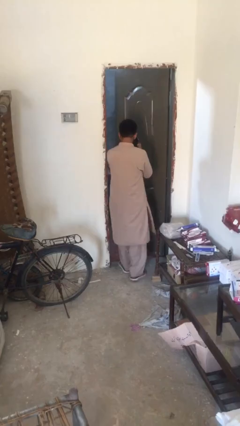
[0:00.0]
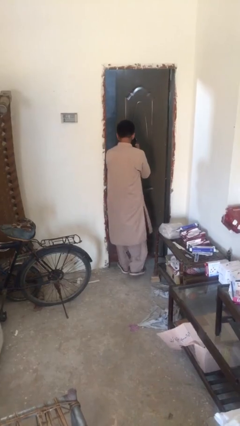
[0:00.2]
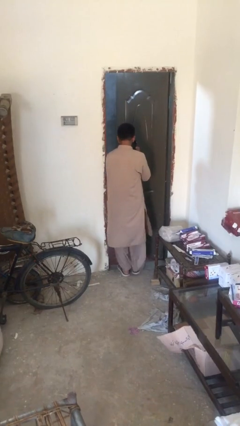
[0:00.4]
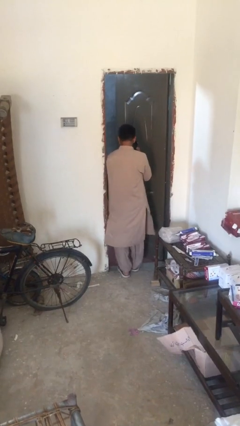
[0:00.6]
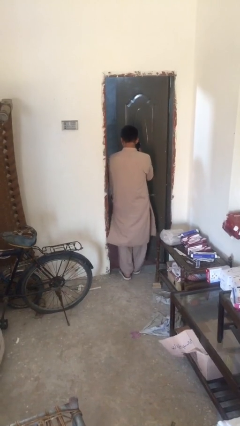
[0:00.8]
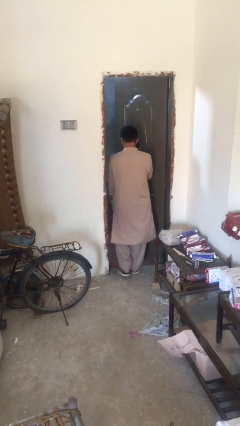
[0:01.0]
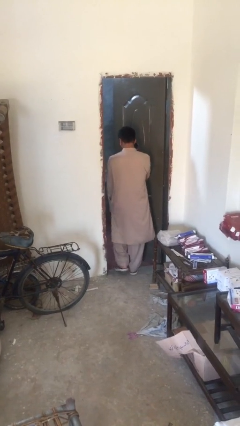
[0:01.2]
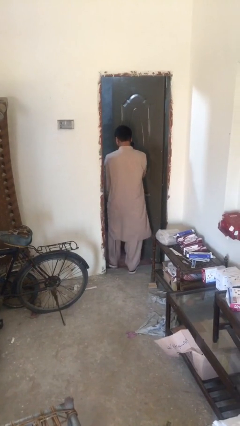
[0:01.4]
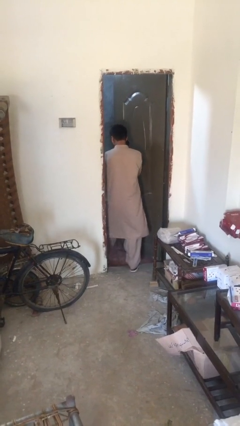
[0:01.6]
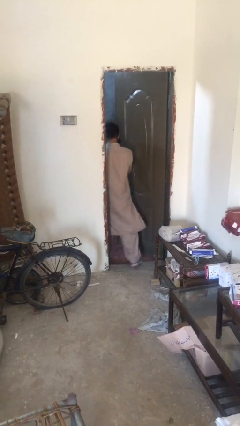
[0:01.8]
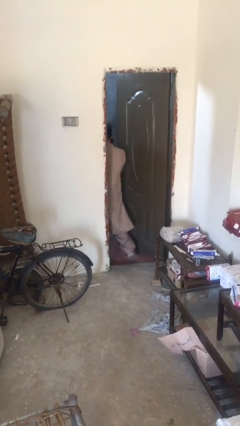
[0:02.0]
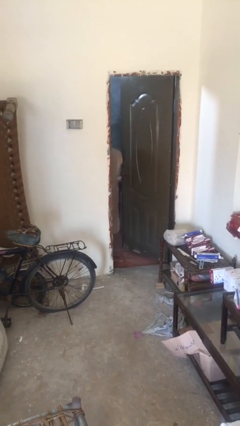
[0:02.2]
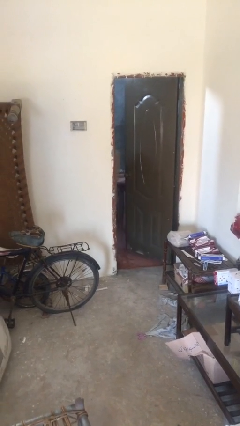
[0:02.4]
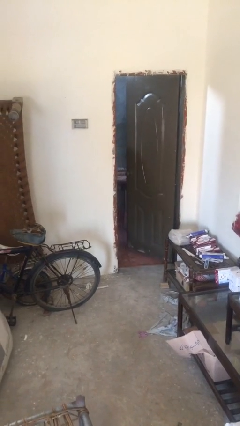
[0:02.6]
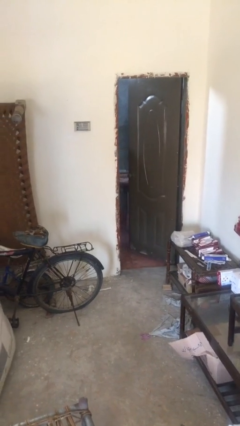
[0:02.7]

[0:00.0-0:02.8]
person exits scene through structure

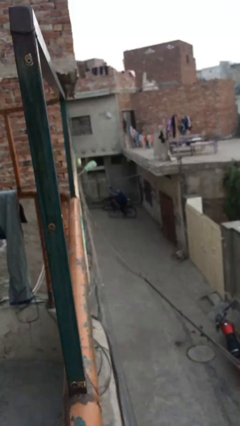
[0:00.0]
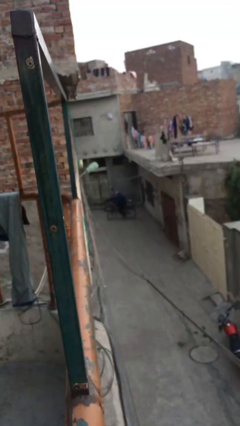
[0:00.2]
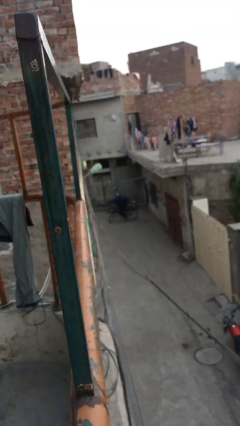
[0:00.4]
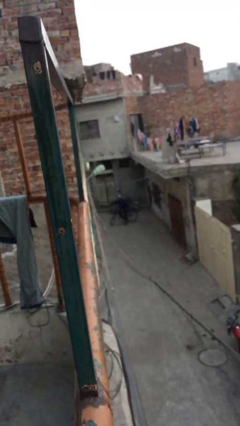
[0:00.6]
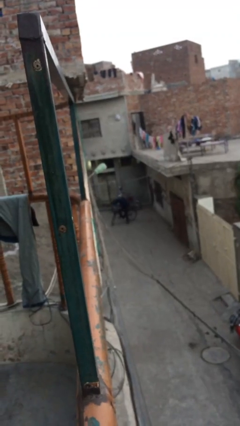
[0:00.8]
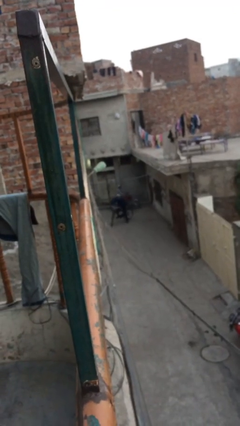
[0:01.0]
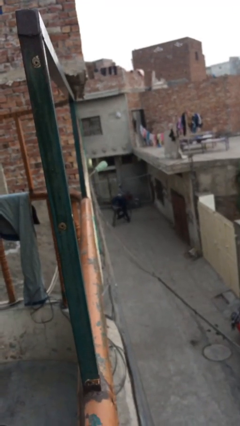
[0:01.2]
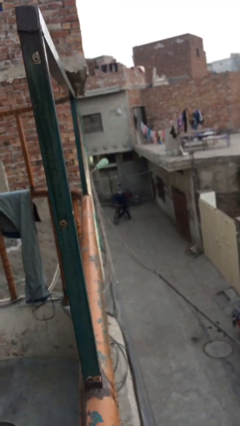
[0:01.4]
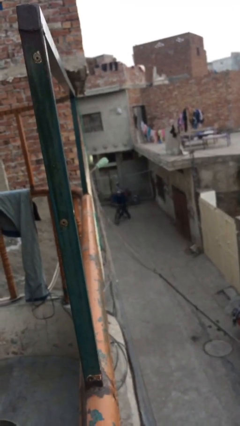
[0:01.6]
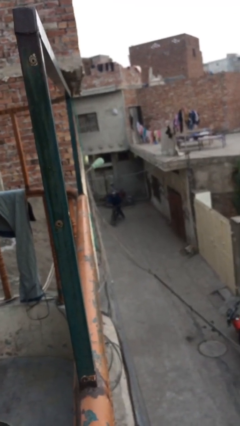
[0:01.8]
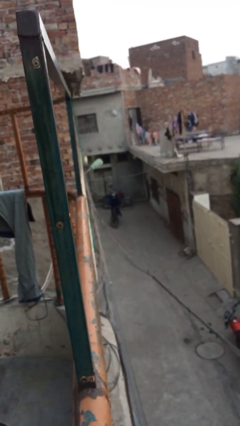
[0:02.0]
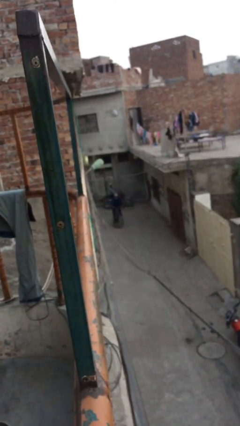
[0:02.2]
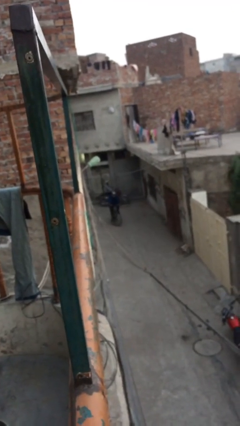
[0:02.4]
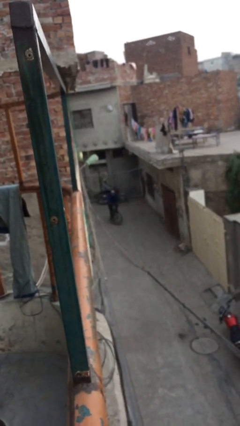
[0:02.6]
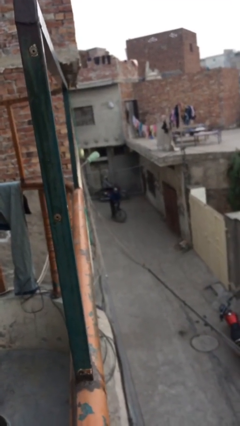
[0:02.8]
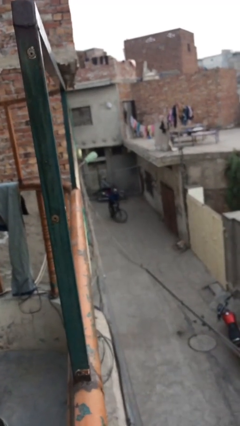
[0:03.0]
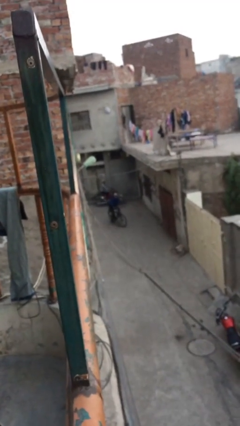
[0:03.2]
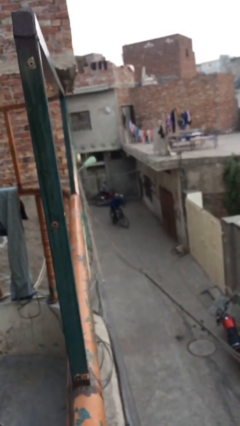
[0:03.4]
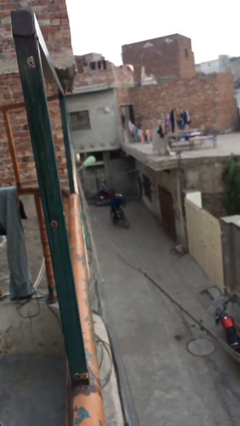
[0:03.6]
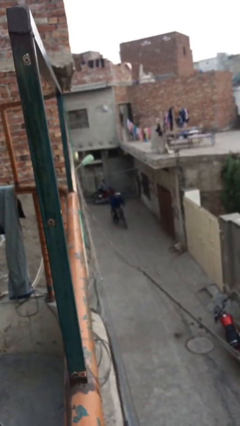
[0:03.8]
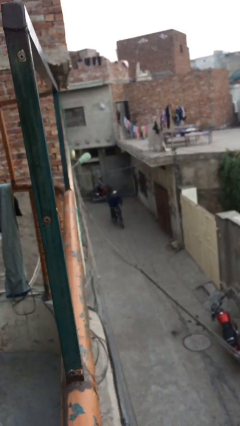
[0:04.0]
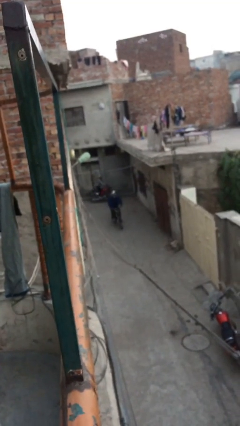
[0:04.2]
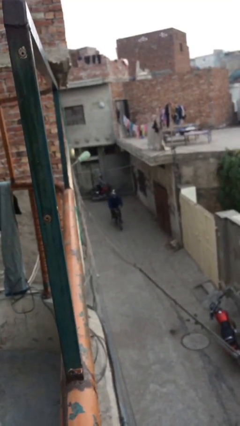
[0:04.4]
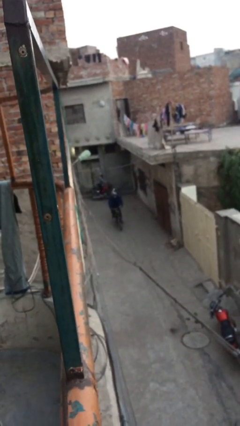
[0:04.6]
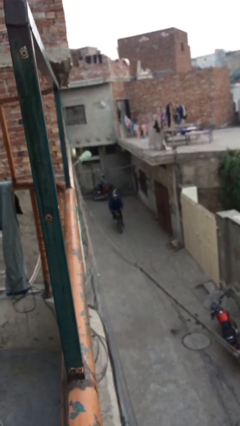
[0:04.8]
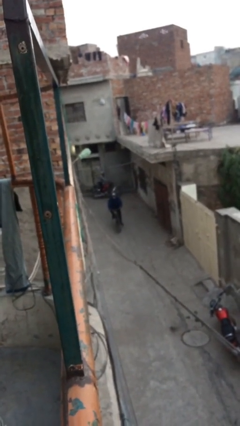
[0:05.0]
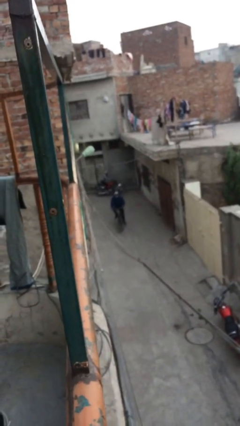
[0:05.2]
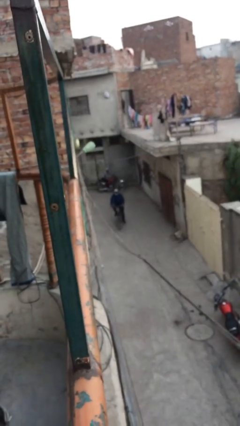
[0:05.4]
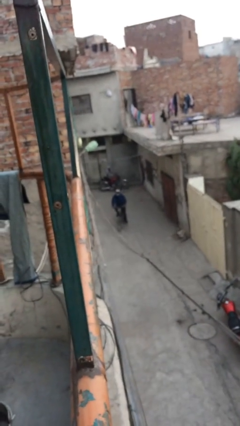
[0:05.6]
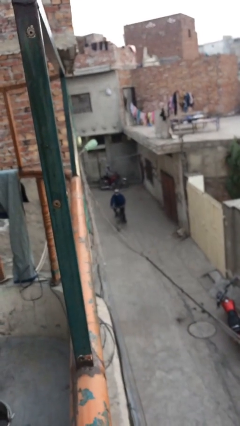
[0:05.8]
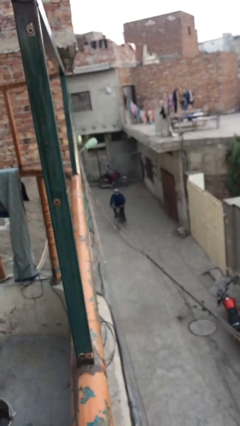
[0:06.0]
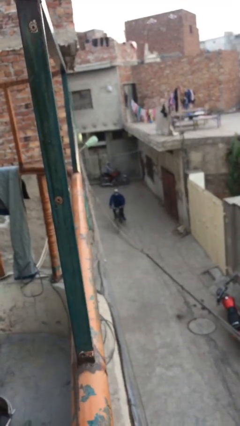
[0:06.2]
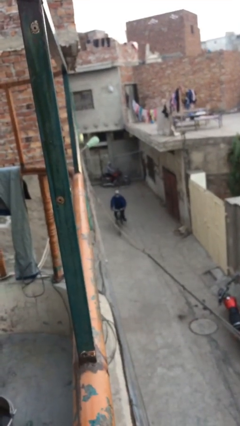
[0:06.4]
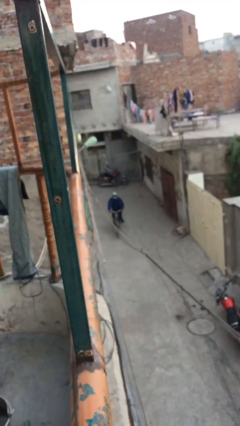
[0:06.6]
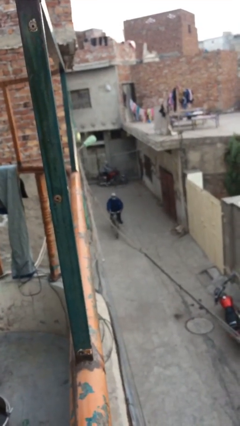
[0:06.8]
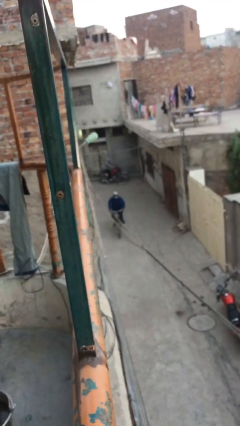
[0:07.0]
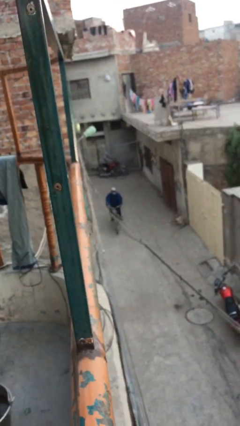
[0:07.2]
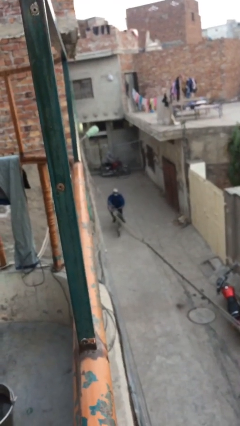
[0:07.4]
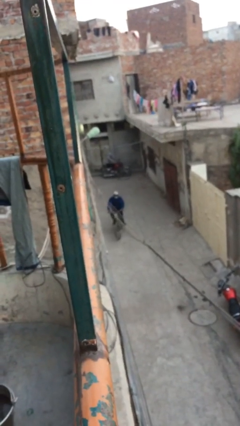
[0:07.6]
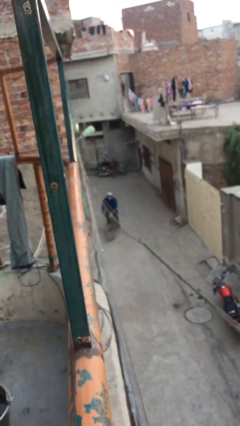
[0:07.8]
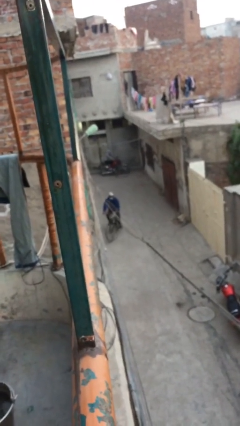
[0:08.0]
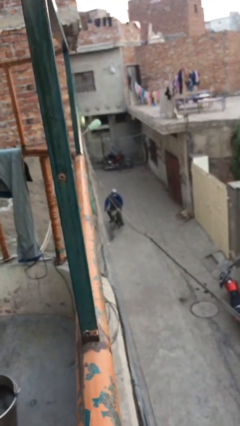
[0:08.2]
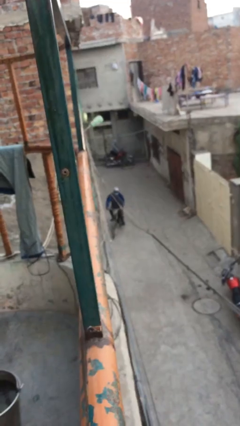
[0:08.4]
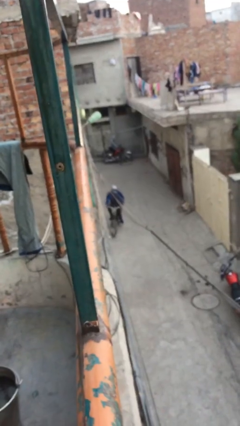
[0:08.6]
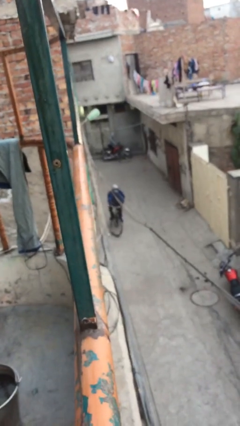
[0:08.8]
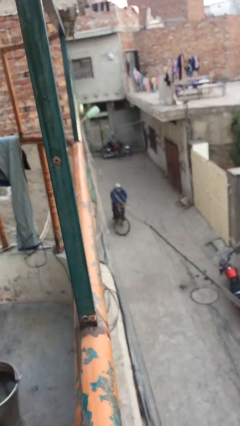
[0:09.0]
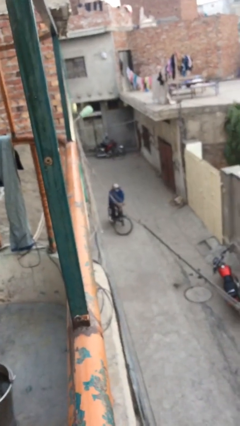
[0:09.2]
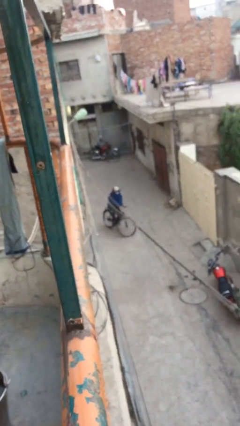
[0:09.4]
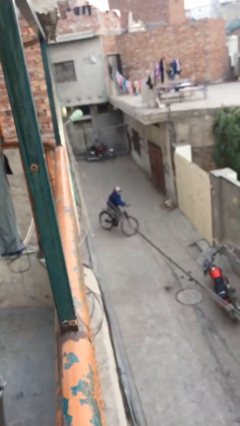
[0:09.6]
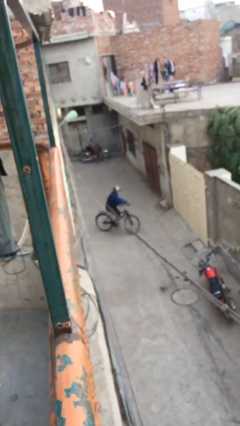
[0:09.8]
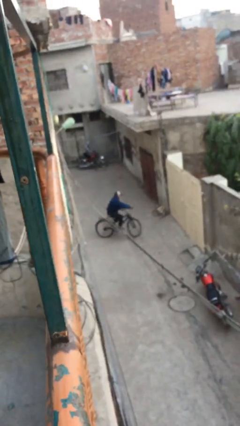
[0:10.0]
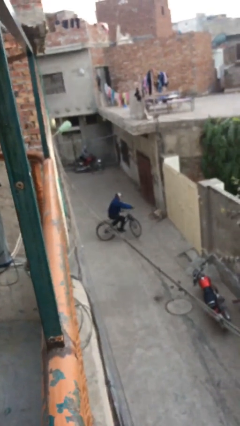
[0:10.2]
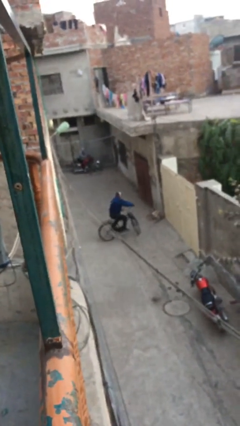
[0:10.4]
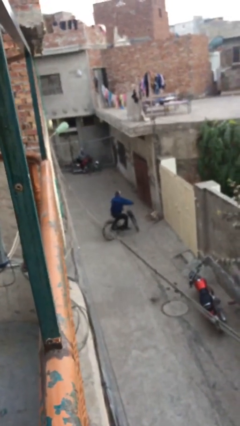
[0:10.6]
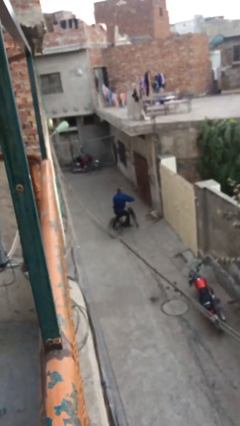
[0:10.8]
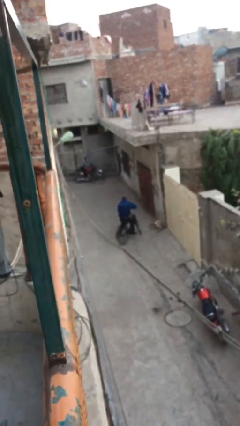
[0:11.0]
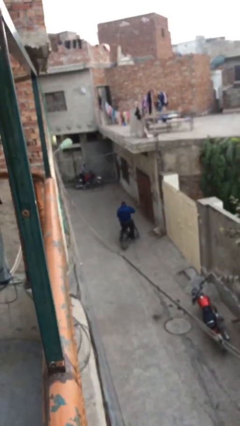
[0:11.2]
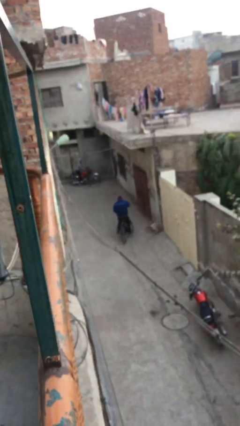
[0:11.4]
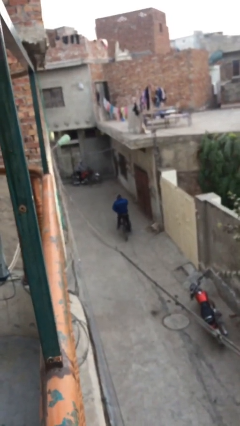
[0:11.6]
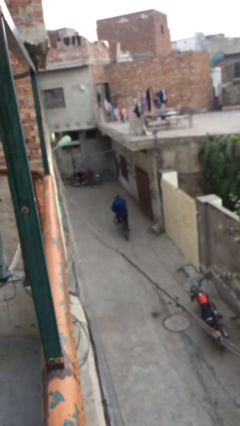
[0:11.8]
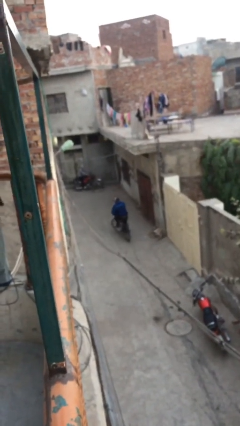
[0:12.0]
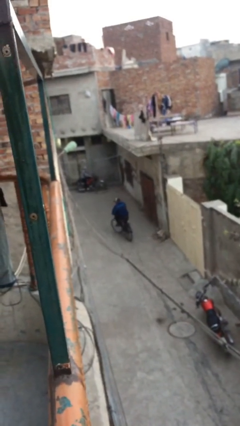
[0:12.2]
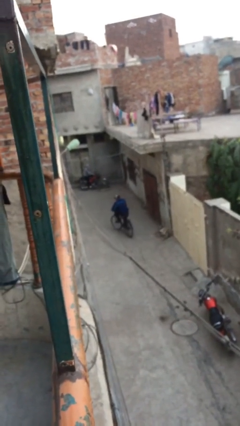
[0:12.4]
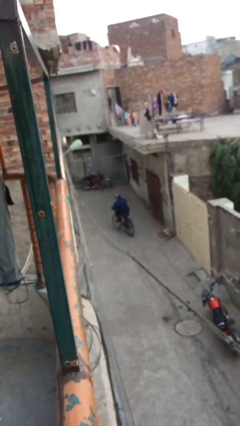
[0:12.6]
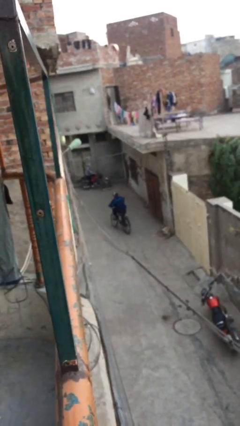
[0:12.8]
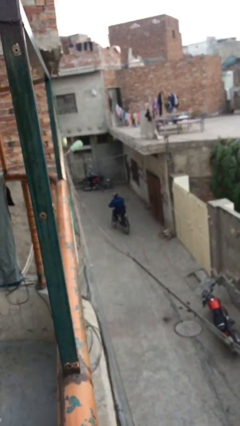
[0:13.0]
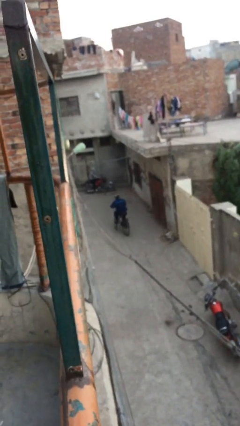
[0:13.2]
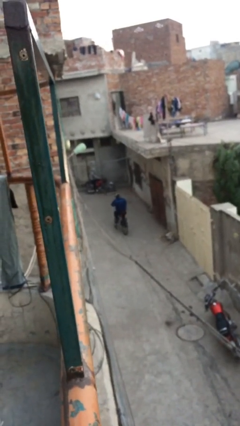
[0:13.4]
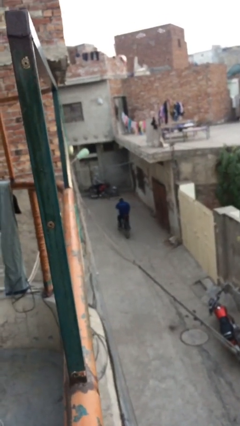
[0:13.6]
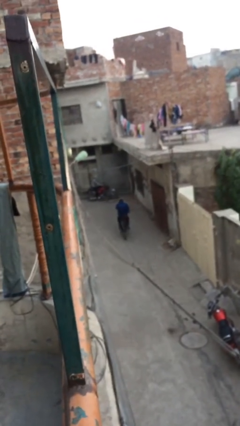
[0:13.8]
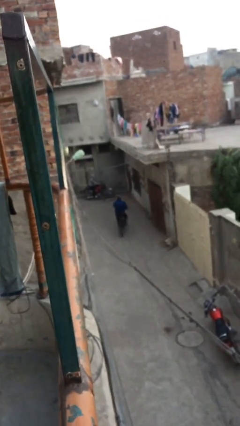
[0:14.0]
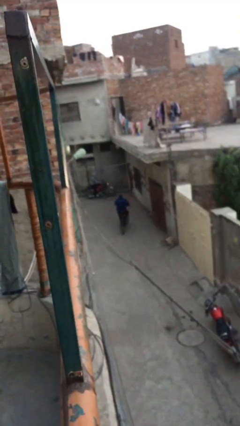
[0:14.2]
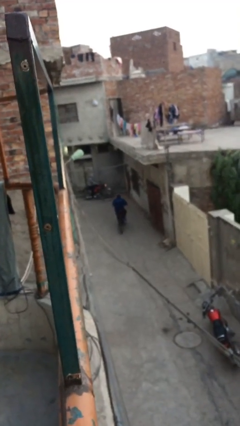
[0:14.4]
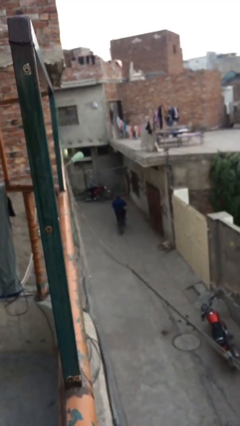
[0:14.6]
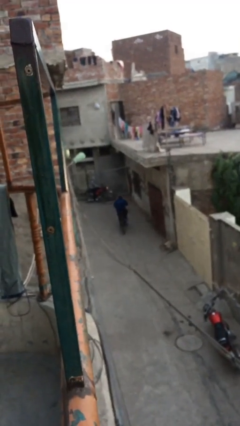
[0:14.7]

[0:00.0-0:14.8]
person rides bicycle

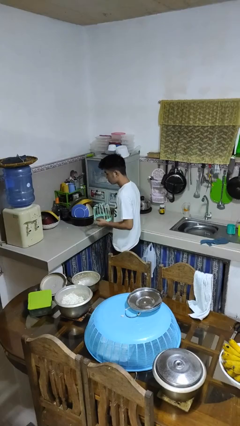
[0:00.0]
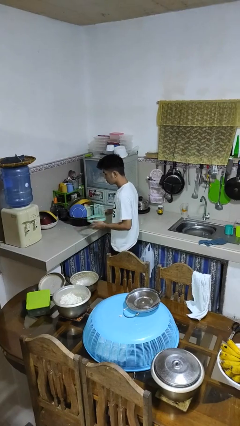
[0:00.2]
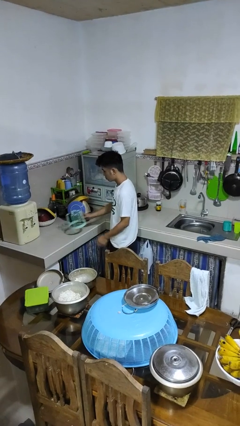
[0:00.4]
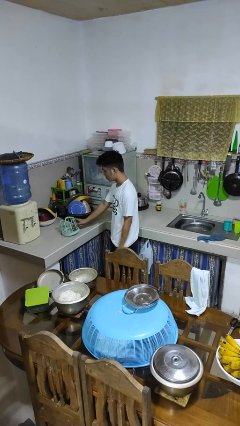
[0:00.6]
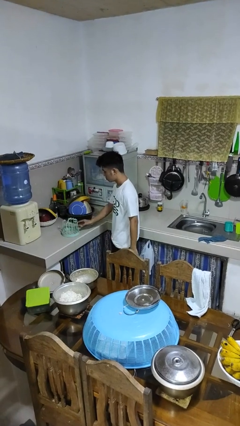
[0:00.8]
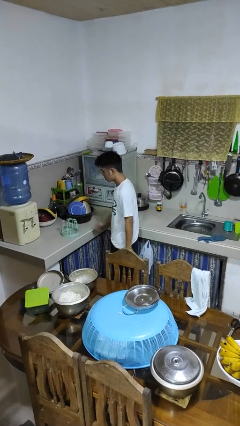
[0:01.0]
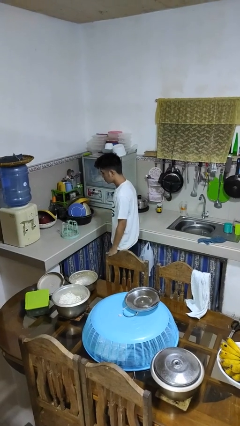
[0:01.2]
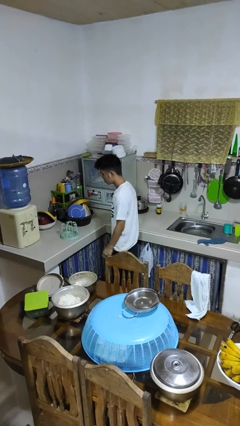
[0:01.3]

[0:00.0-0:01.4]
person puts down object on countertop
